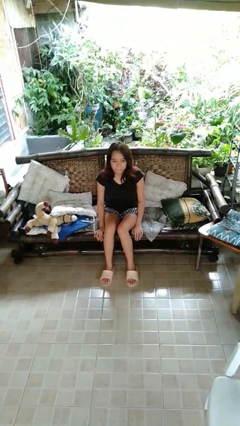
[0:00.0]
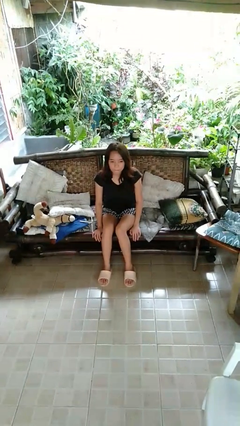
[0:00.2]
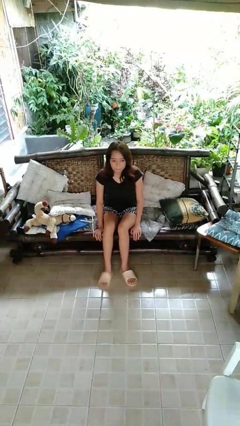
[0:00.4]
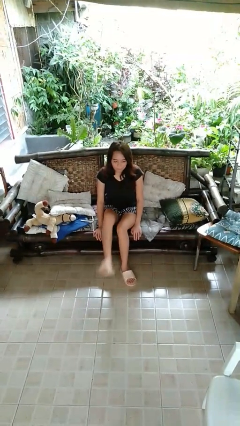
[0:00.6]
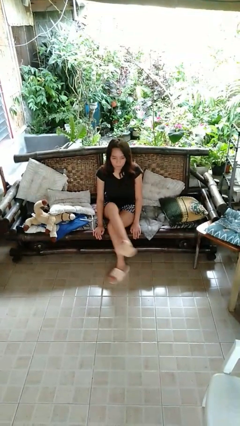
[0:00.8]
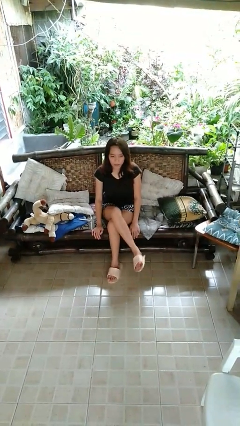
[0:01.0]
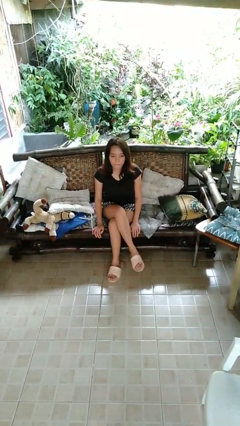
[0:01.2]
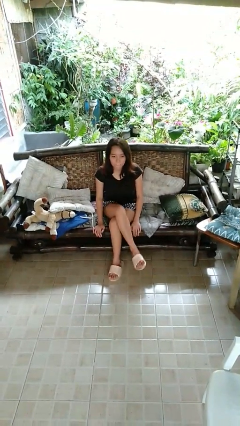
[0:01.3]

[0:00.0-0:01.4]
person crosses legs

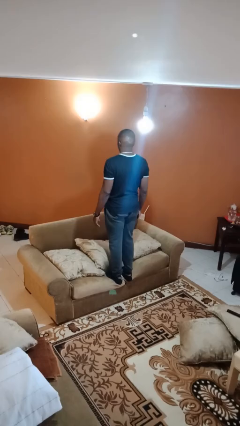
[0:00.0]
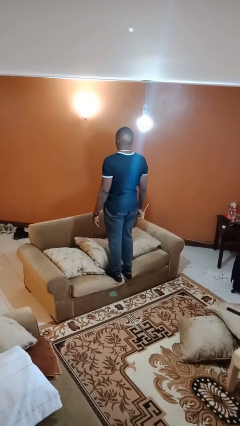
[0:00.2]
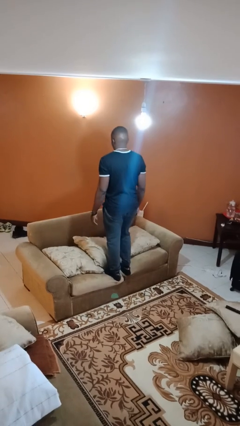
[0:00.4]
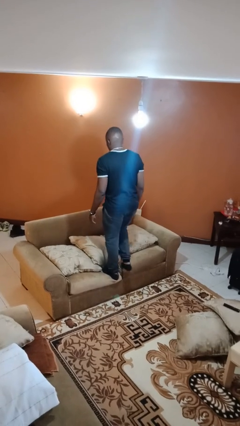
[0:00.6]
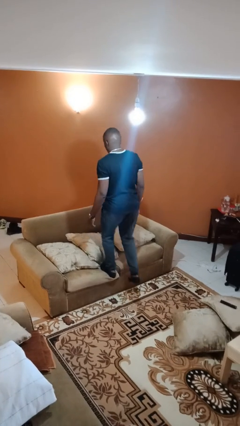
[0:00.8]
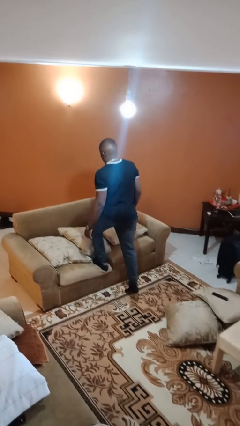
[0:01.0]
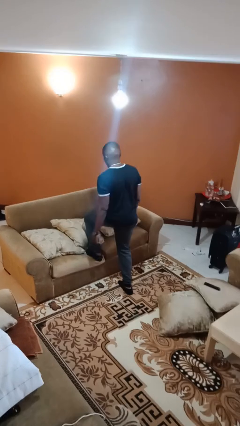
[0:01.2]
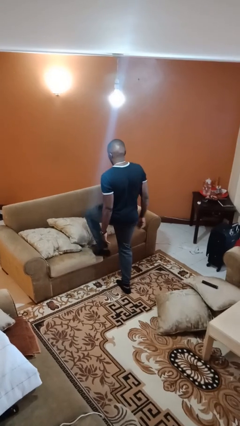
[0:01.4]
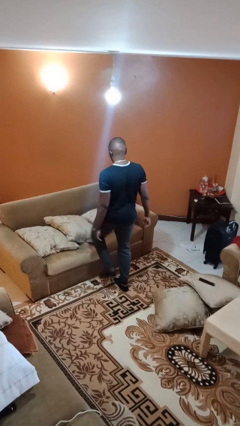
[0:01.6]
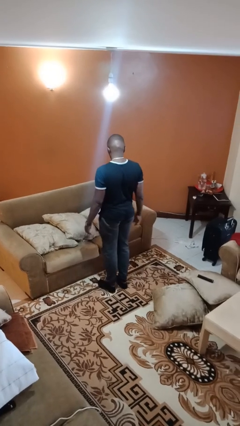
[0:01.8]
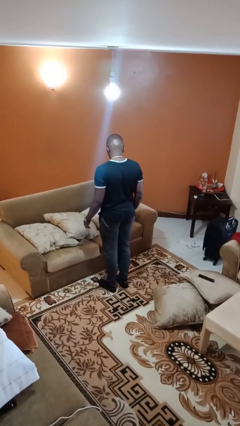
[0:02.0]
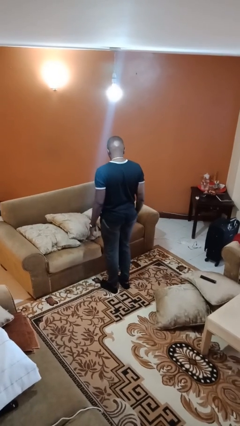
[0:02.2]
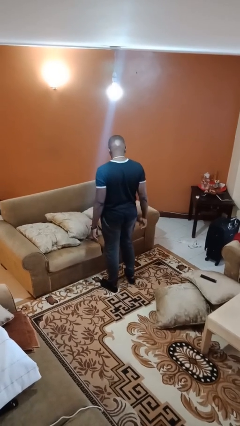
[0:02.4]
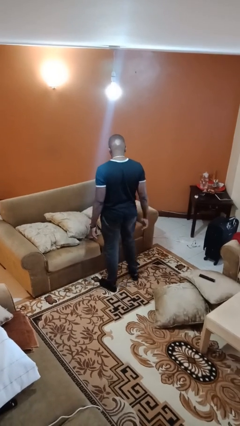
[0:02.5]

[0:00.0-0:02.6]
person climbs off couch

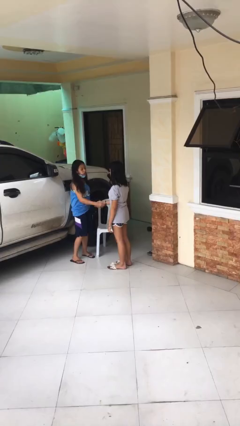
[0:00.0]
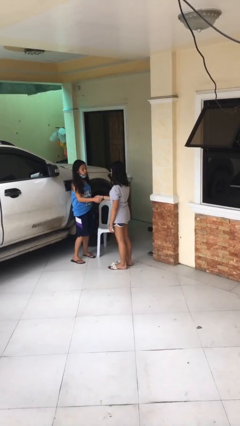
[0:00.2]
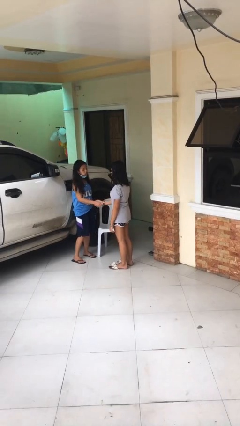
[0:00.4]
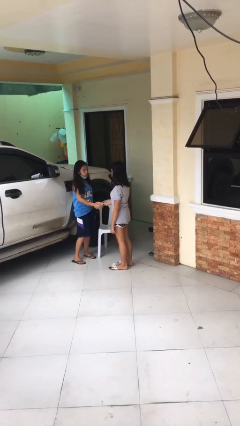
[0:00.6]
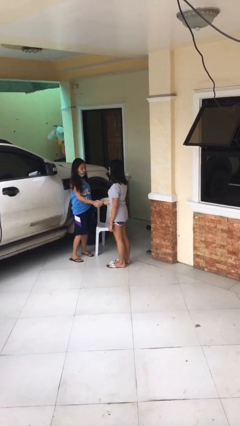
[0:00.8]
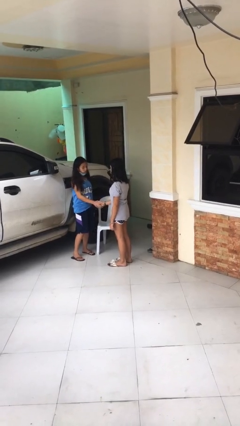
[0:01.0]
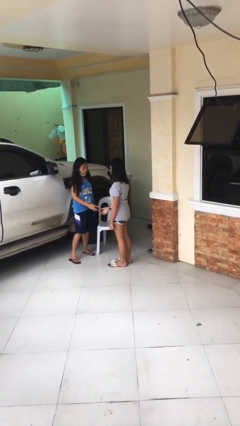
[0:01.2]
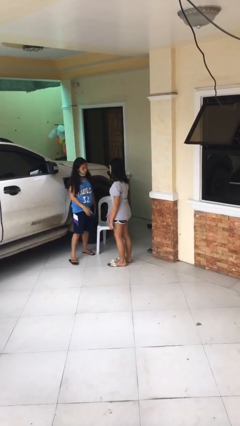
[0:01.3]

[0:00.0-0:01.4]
person shakes hand

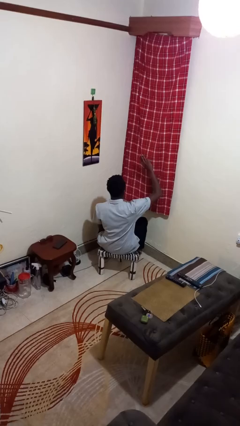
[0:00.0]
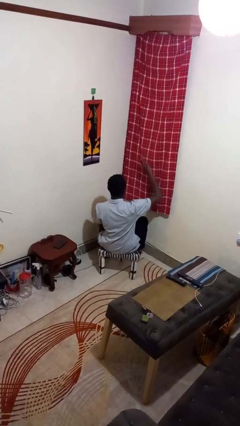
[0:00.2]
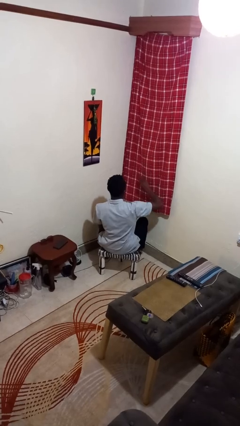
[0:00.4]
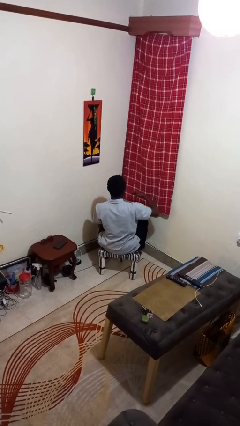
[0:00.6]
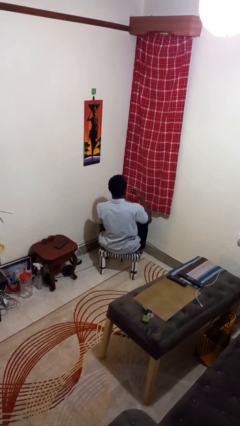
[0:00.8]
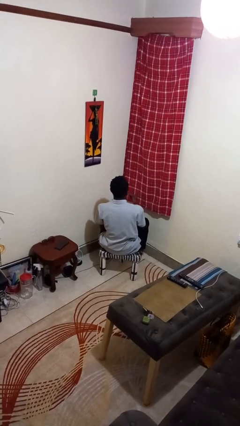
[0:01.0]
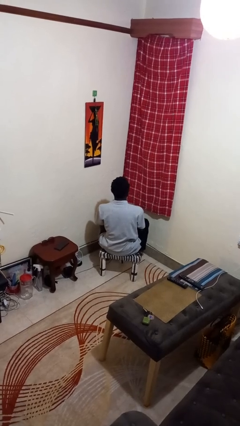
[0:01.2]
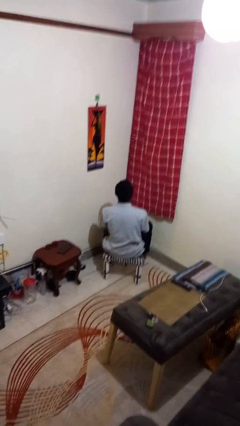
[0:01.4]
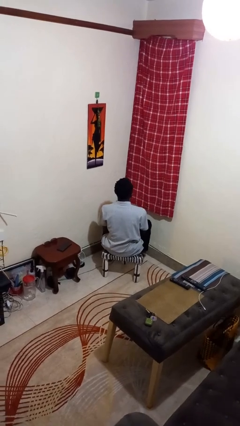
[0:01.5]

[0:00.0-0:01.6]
person gestures swipe down

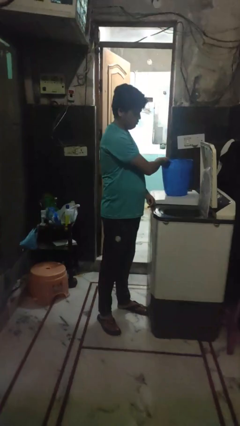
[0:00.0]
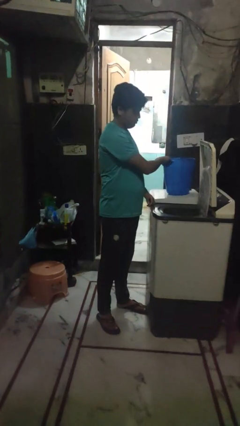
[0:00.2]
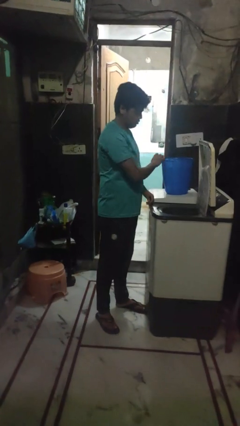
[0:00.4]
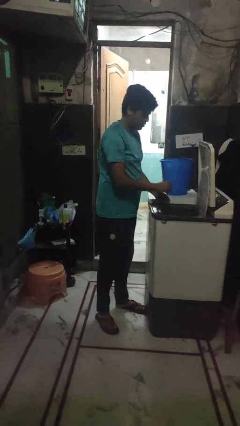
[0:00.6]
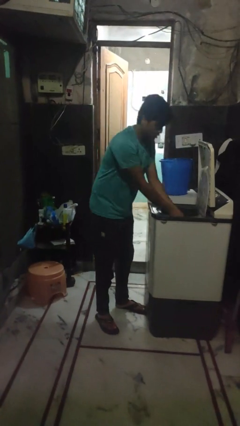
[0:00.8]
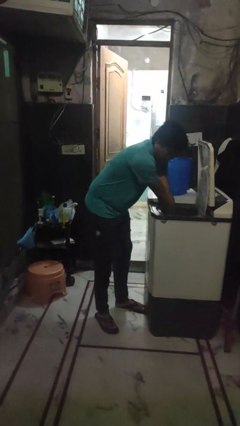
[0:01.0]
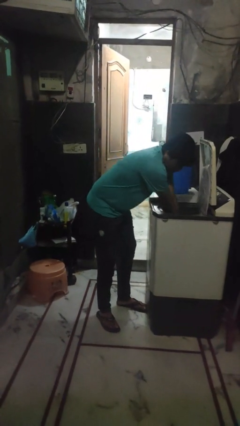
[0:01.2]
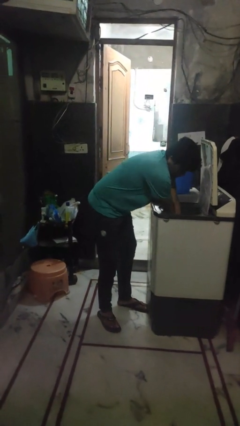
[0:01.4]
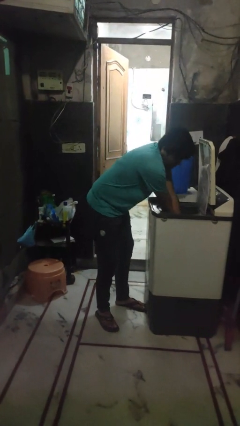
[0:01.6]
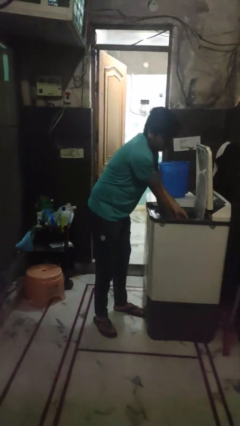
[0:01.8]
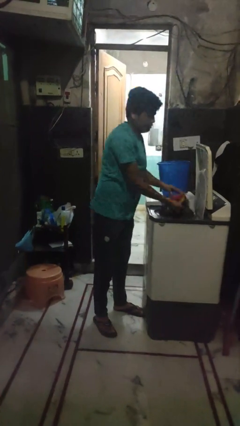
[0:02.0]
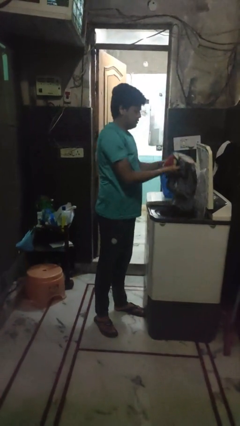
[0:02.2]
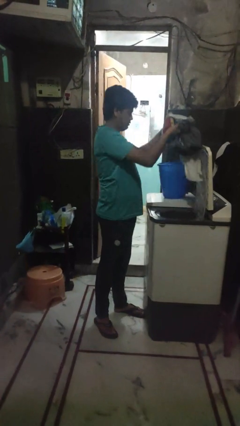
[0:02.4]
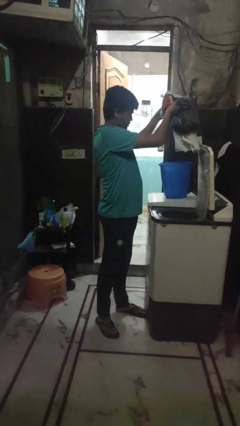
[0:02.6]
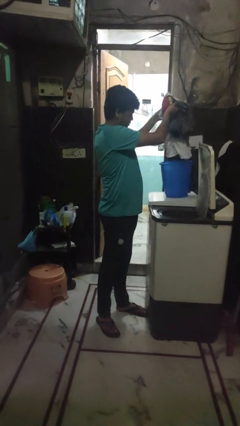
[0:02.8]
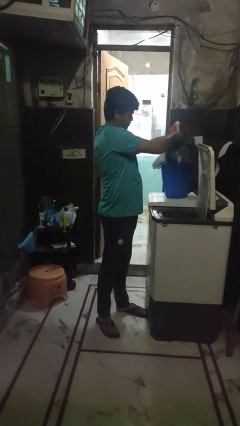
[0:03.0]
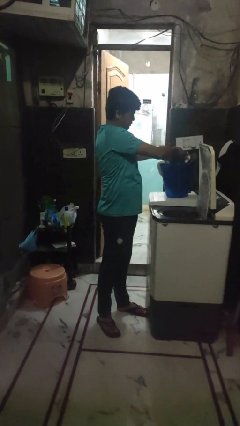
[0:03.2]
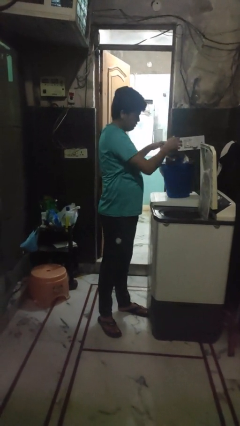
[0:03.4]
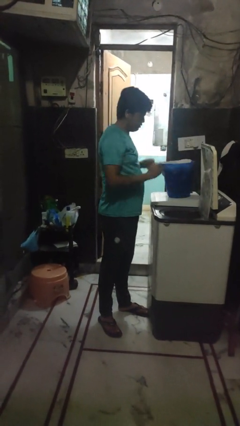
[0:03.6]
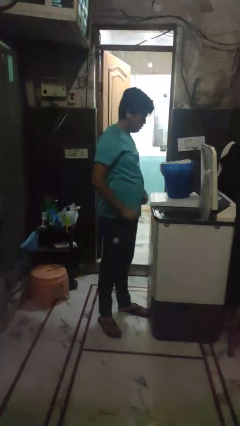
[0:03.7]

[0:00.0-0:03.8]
person unloads clotheswasher

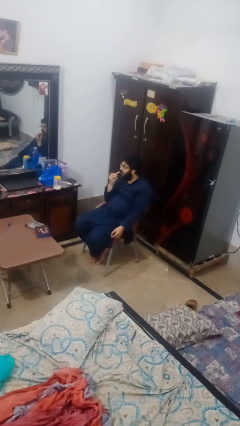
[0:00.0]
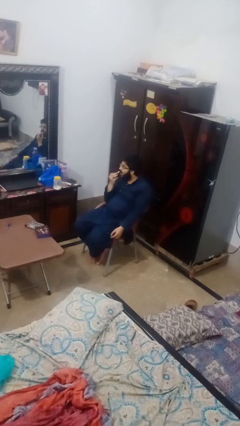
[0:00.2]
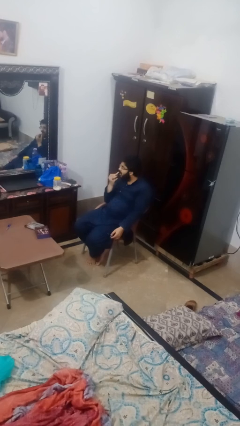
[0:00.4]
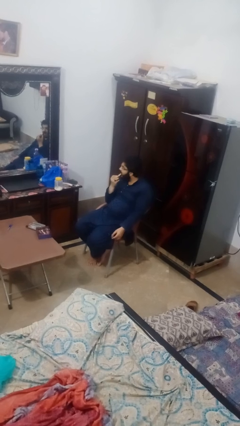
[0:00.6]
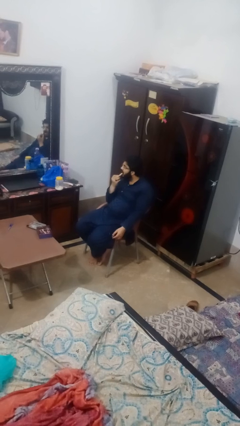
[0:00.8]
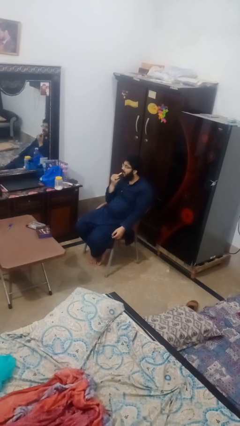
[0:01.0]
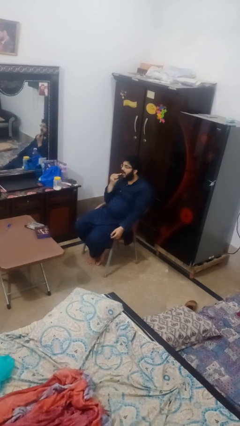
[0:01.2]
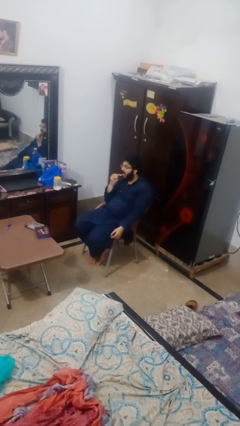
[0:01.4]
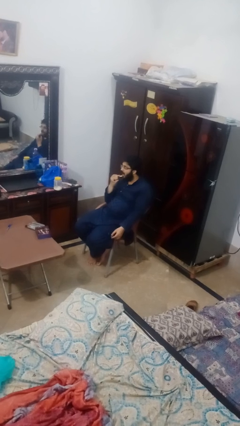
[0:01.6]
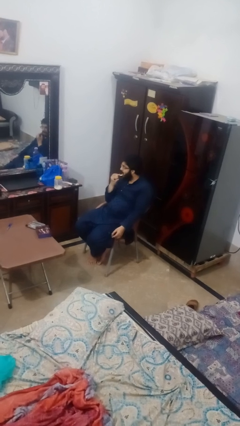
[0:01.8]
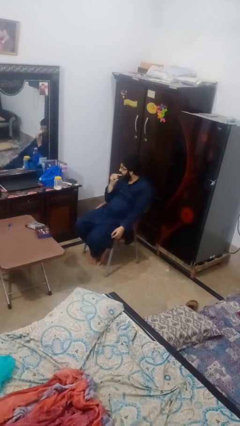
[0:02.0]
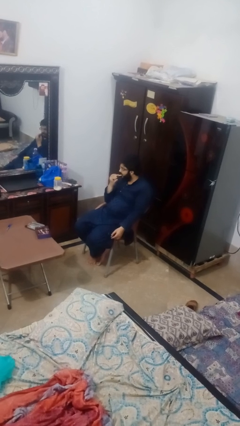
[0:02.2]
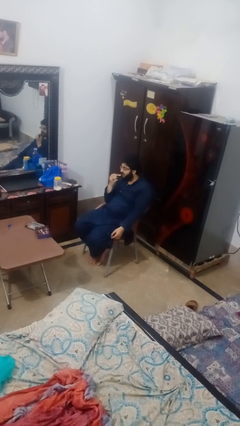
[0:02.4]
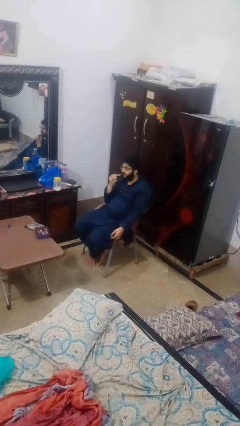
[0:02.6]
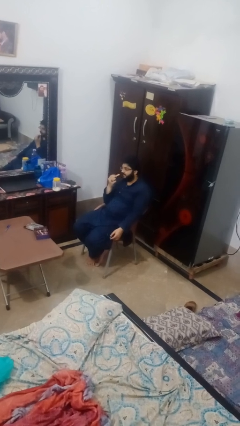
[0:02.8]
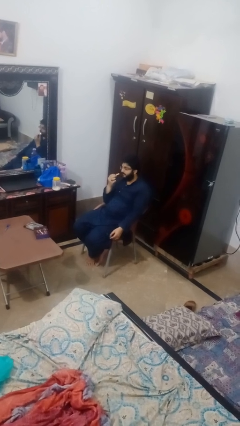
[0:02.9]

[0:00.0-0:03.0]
person applies lip makeup

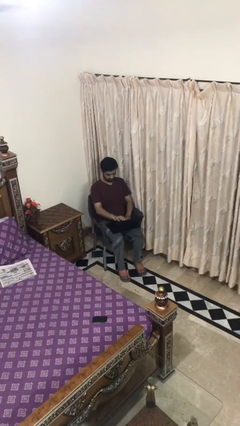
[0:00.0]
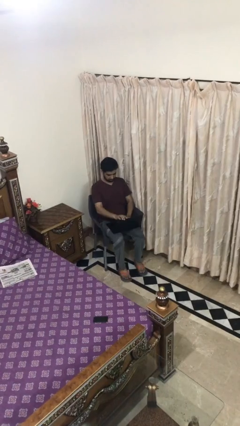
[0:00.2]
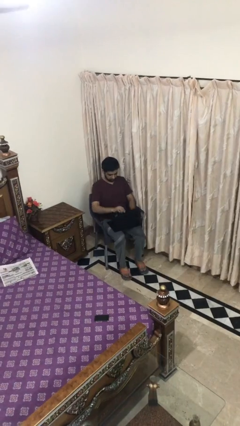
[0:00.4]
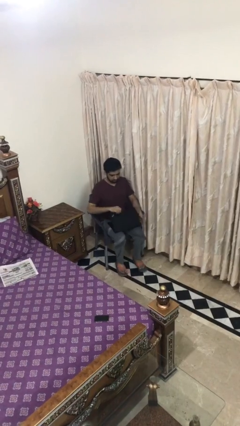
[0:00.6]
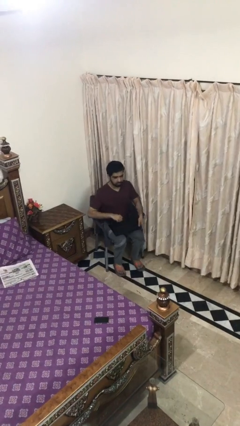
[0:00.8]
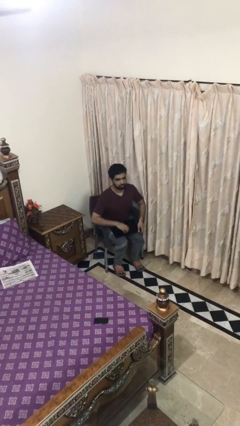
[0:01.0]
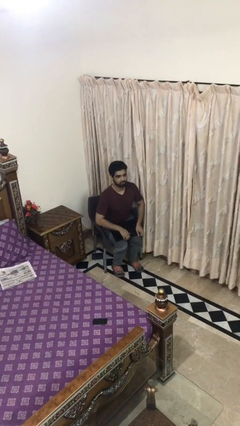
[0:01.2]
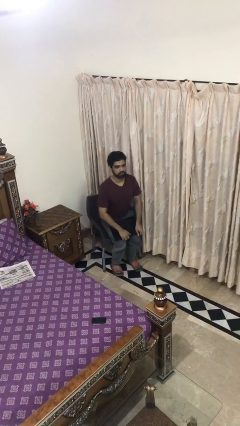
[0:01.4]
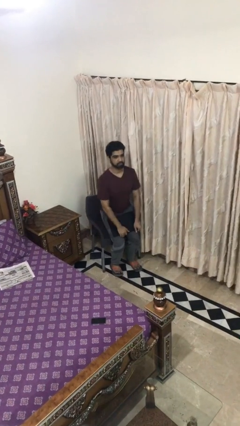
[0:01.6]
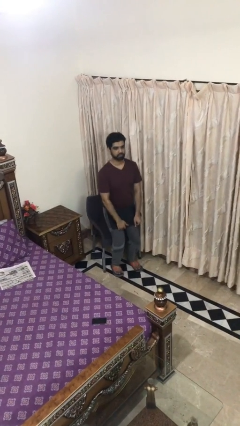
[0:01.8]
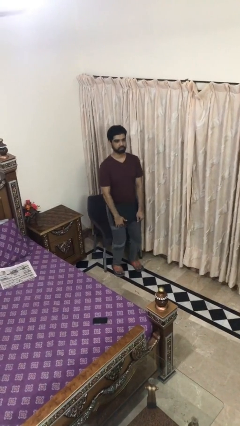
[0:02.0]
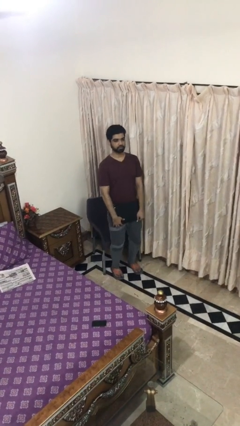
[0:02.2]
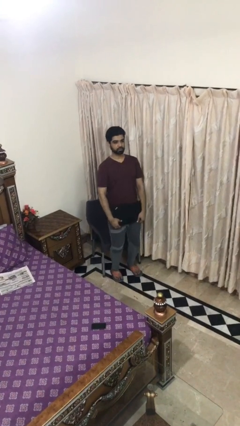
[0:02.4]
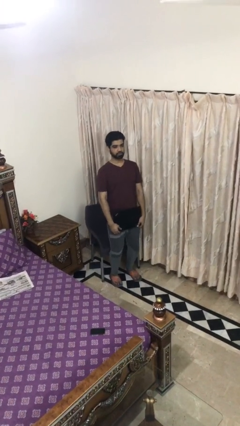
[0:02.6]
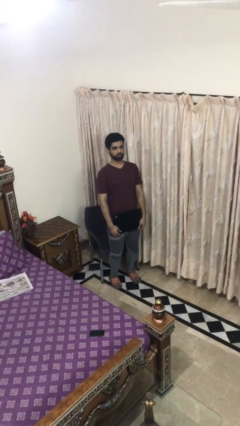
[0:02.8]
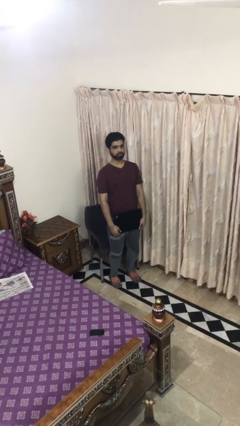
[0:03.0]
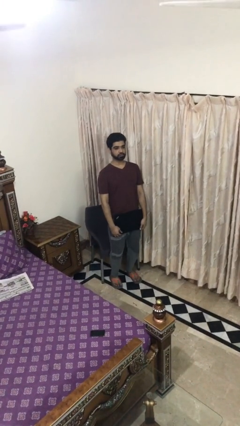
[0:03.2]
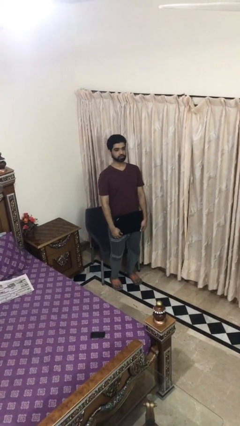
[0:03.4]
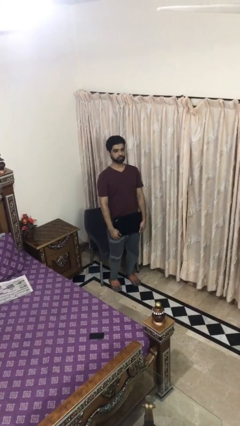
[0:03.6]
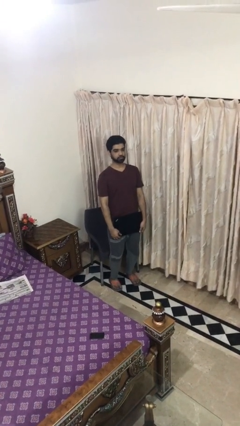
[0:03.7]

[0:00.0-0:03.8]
person stands up
